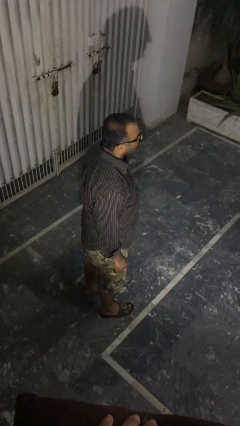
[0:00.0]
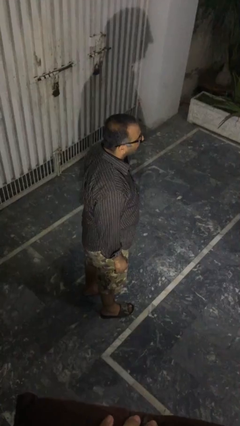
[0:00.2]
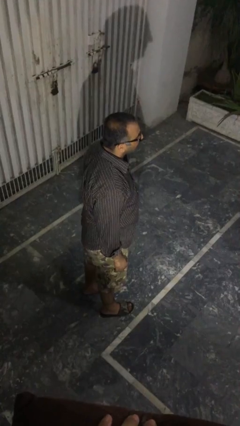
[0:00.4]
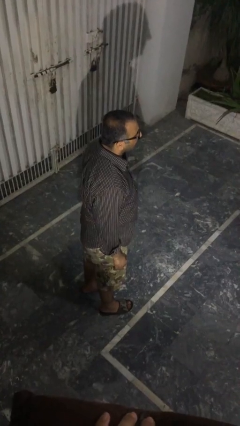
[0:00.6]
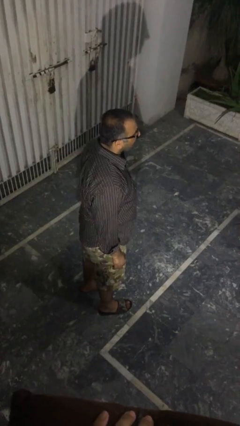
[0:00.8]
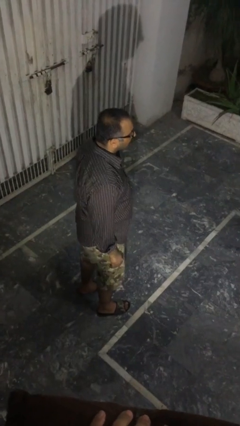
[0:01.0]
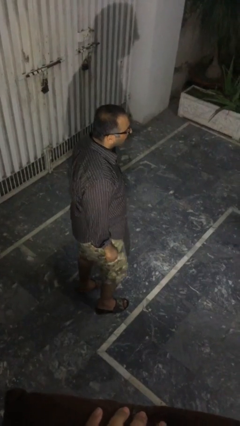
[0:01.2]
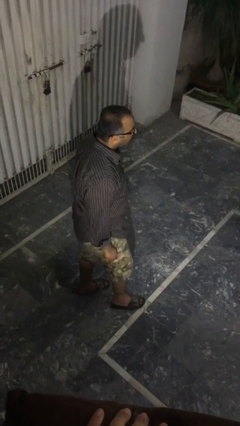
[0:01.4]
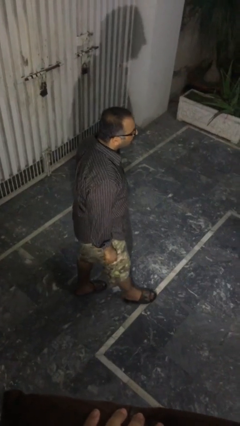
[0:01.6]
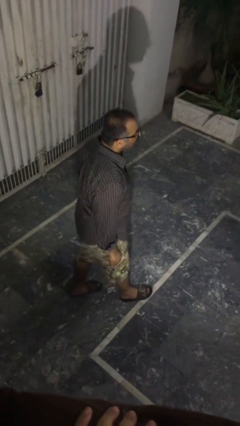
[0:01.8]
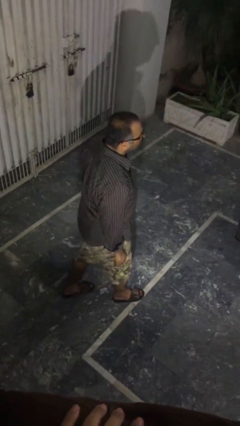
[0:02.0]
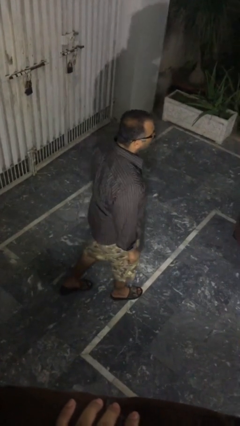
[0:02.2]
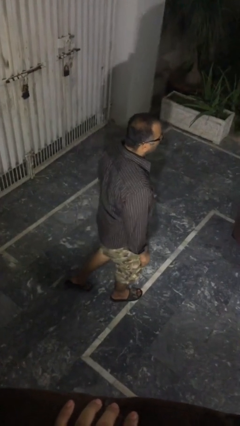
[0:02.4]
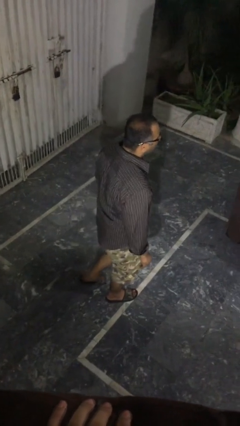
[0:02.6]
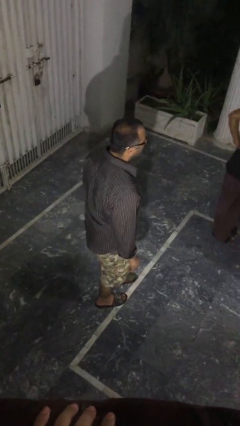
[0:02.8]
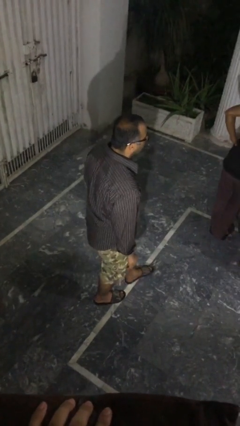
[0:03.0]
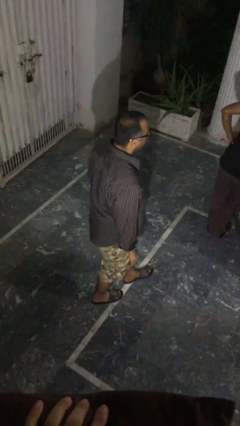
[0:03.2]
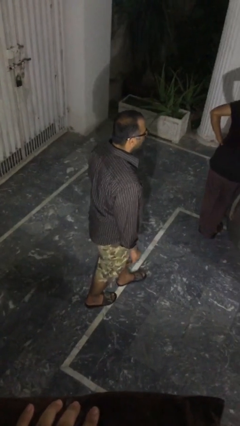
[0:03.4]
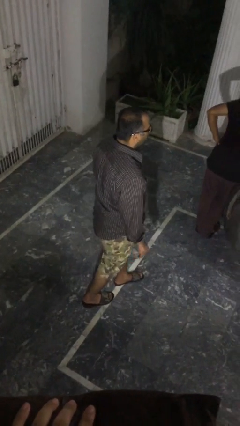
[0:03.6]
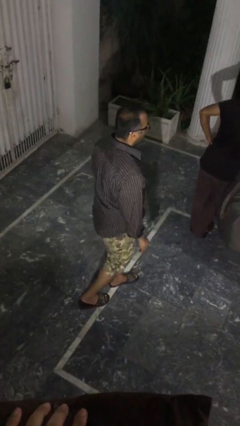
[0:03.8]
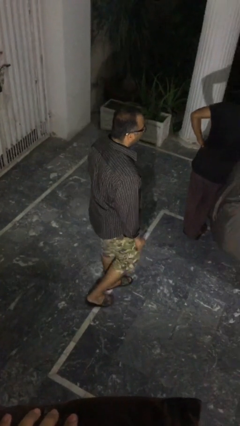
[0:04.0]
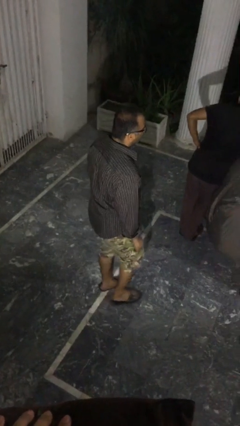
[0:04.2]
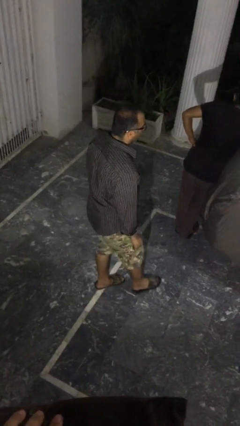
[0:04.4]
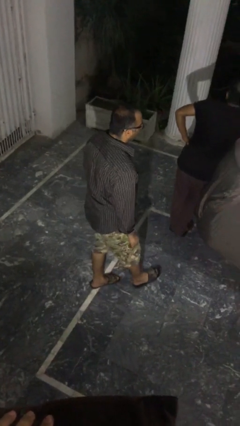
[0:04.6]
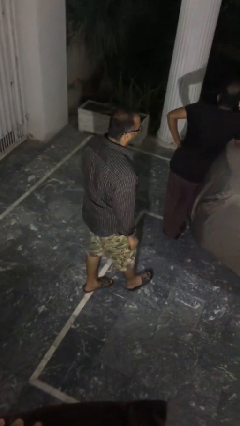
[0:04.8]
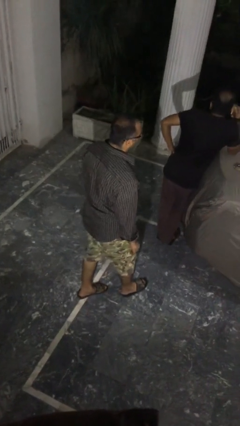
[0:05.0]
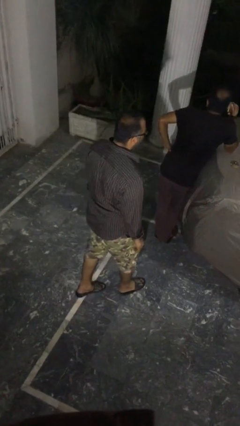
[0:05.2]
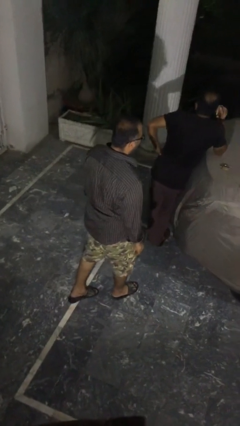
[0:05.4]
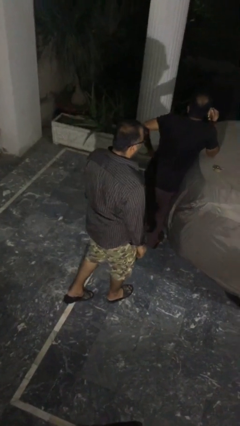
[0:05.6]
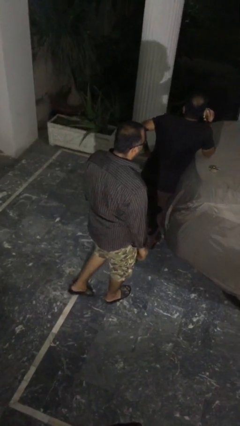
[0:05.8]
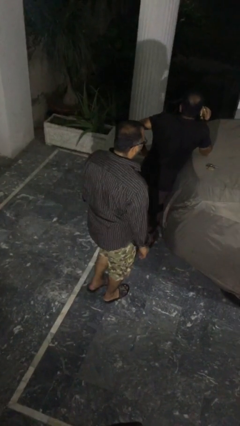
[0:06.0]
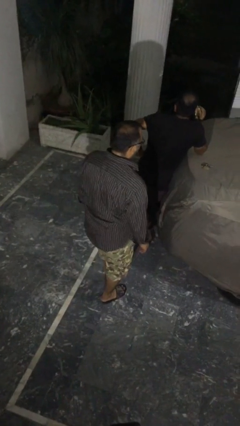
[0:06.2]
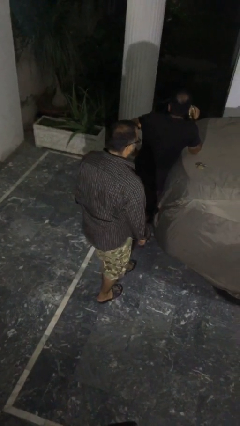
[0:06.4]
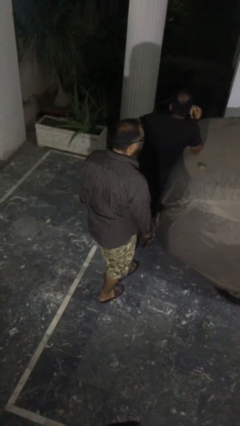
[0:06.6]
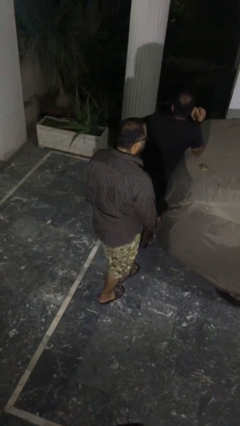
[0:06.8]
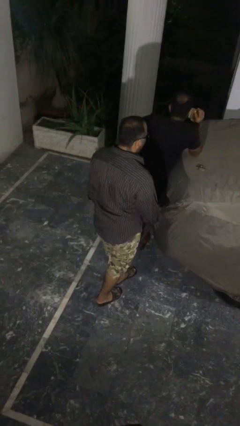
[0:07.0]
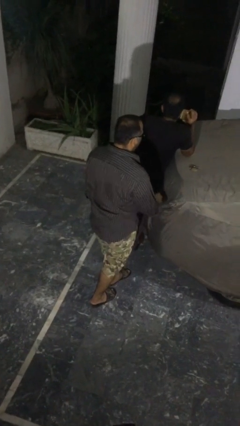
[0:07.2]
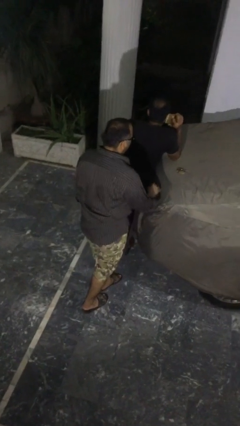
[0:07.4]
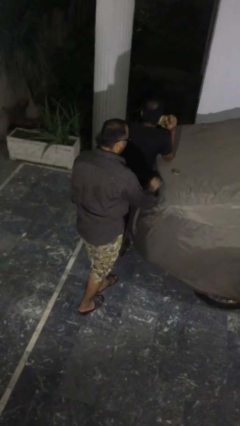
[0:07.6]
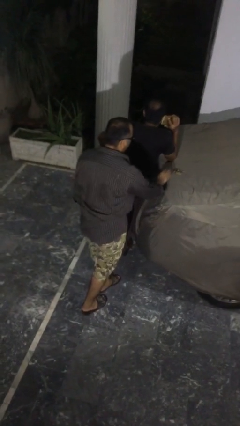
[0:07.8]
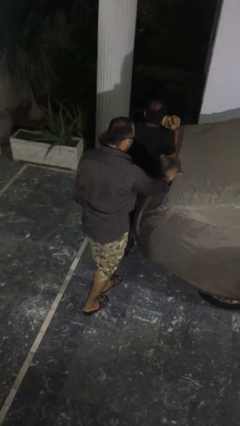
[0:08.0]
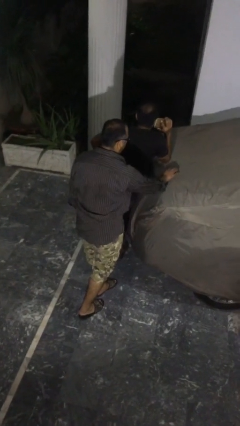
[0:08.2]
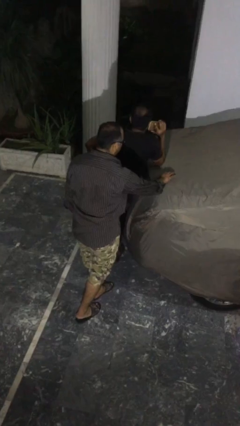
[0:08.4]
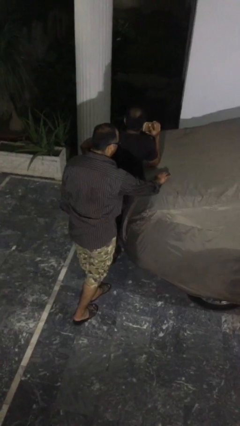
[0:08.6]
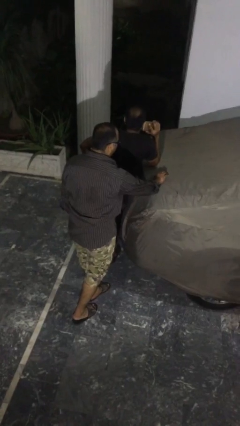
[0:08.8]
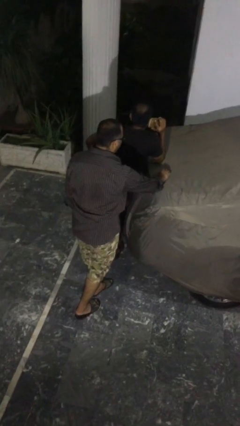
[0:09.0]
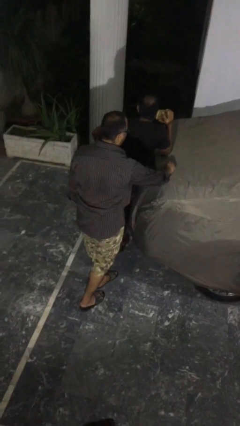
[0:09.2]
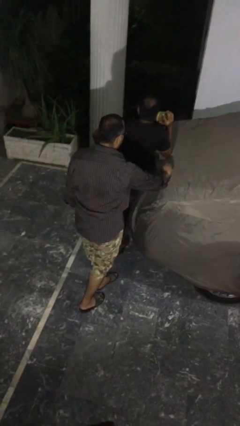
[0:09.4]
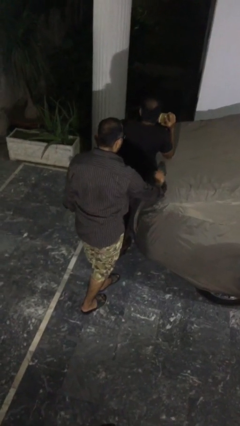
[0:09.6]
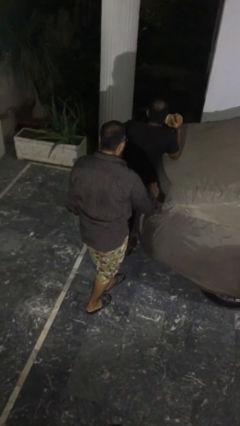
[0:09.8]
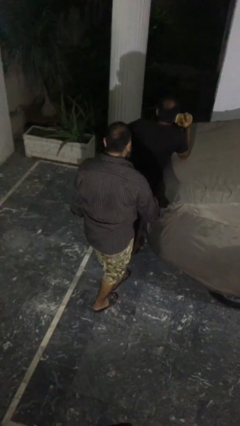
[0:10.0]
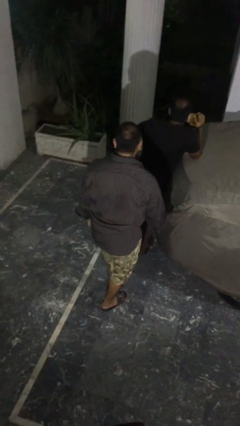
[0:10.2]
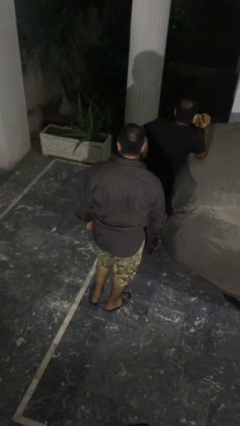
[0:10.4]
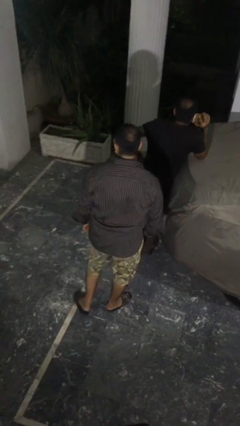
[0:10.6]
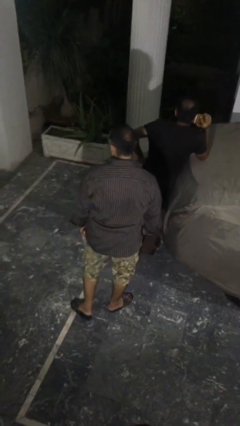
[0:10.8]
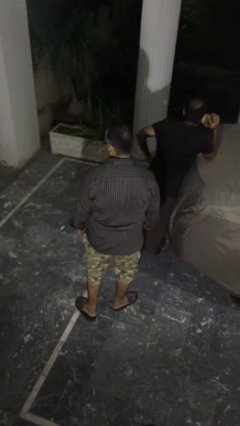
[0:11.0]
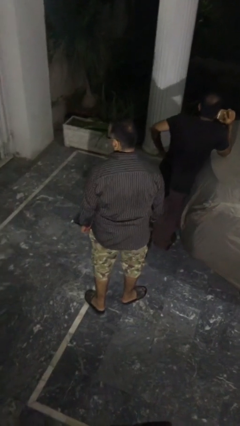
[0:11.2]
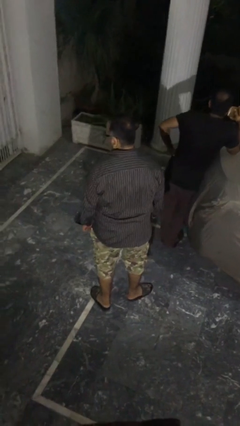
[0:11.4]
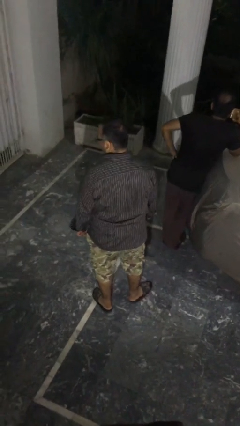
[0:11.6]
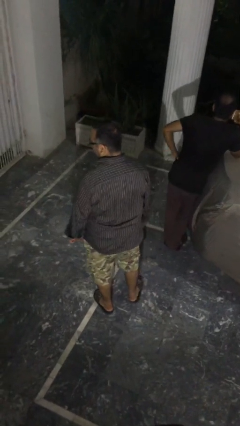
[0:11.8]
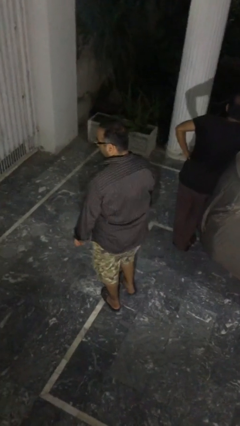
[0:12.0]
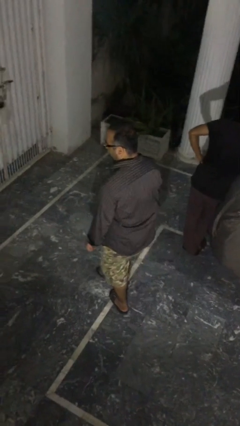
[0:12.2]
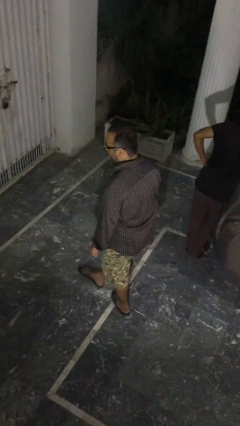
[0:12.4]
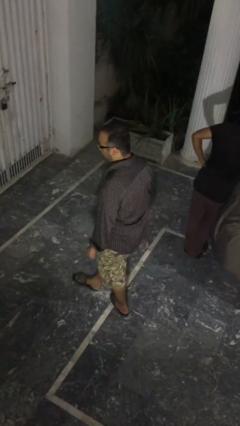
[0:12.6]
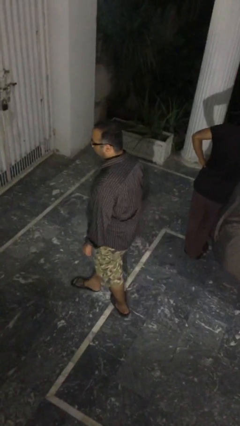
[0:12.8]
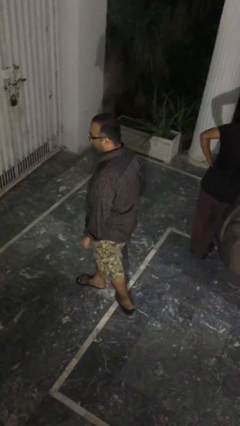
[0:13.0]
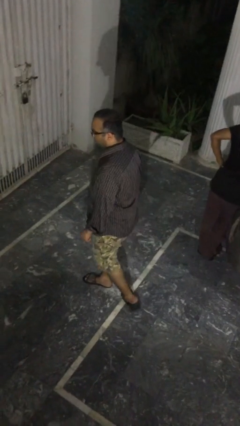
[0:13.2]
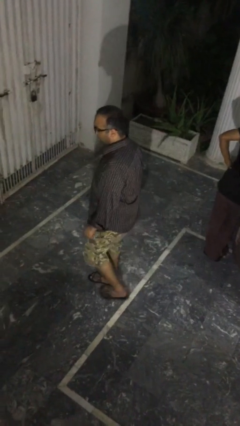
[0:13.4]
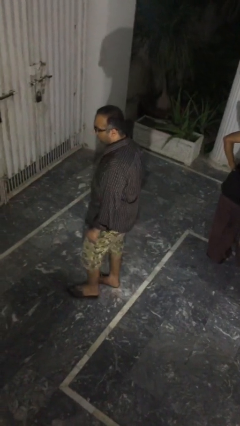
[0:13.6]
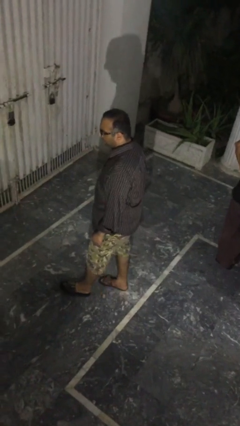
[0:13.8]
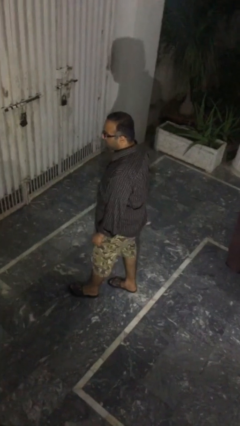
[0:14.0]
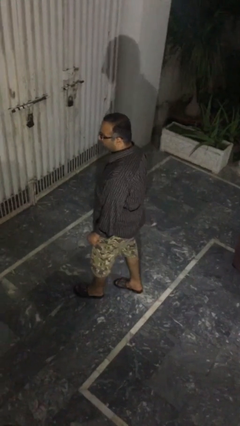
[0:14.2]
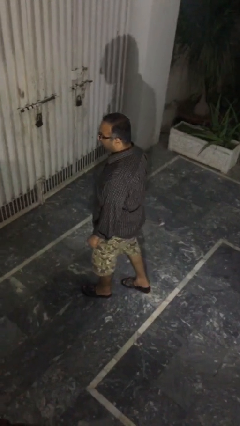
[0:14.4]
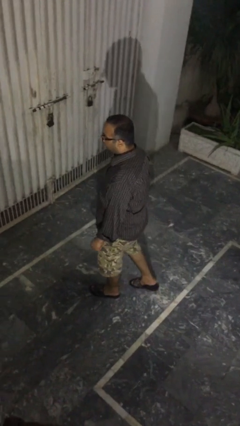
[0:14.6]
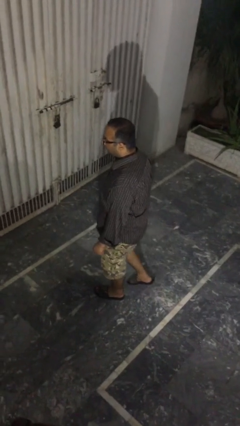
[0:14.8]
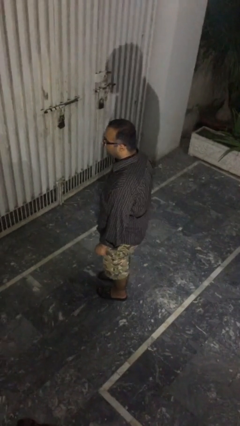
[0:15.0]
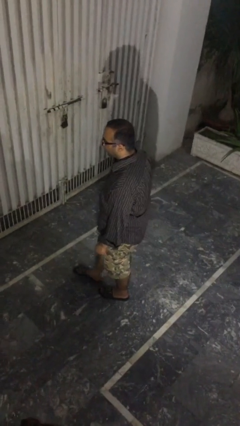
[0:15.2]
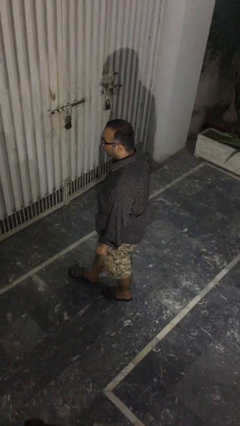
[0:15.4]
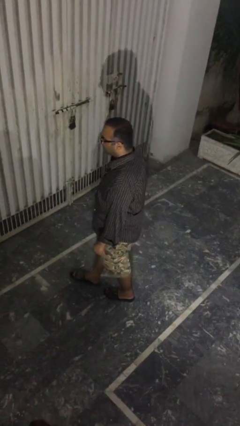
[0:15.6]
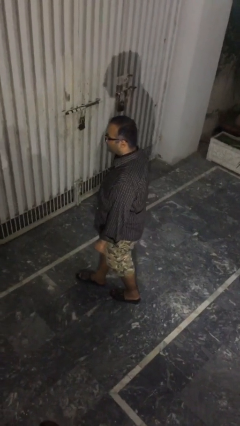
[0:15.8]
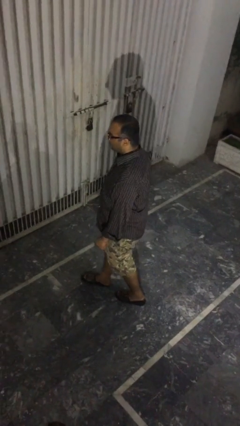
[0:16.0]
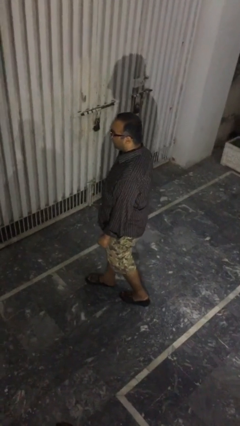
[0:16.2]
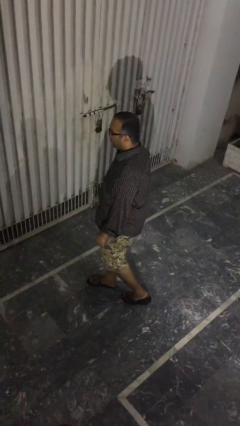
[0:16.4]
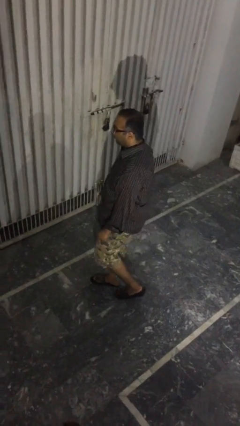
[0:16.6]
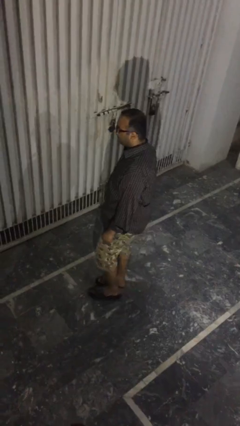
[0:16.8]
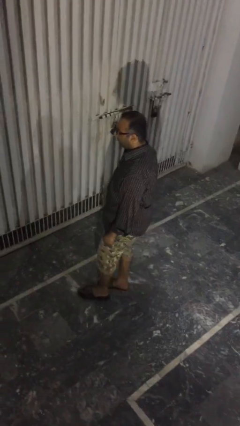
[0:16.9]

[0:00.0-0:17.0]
person steals object from person

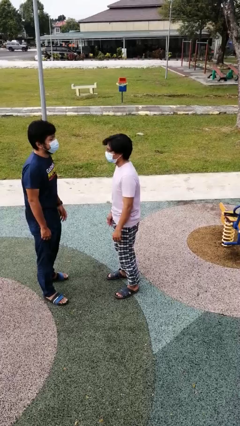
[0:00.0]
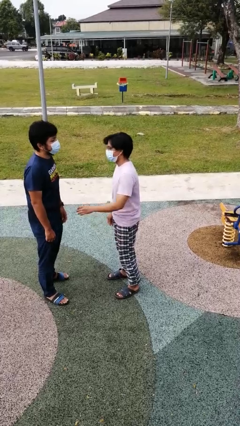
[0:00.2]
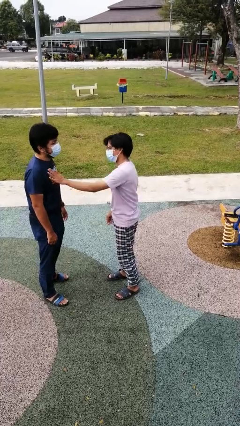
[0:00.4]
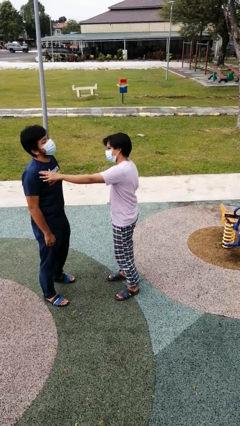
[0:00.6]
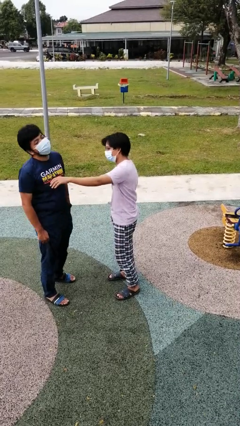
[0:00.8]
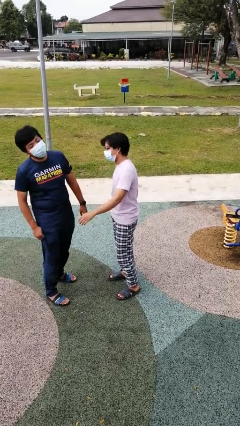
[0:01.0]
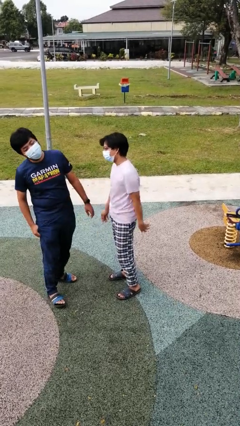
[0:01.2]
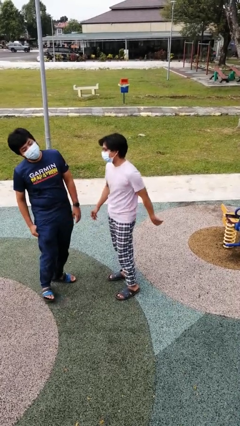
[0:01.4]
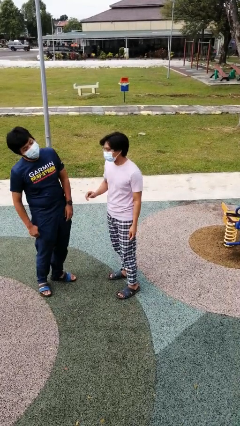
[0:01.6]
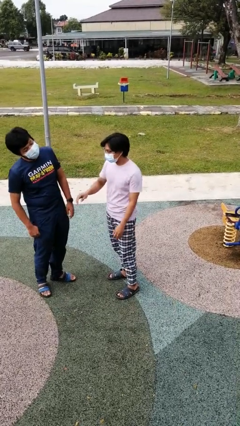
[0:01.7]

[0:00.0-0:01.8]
person shoves person
